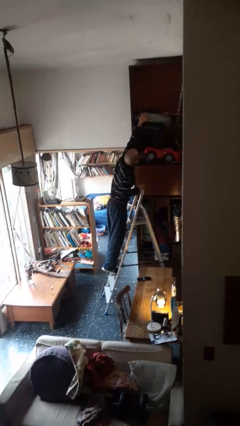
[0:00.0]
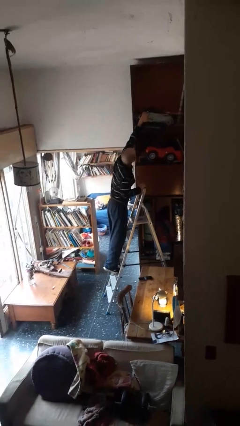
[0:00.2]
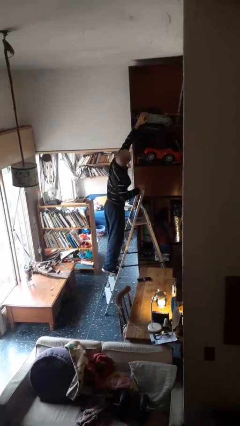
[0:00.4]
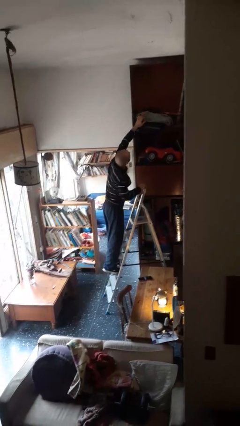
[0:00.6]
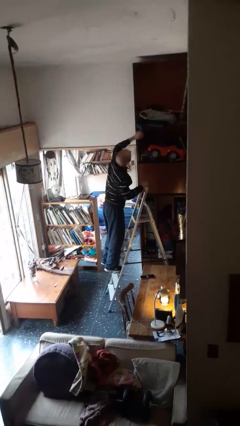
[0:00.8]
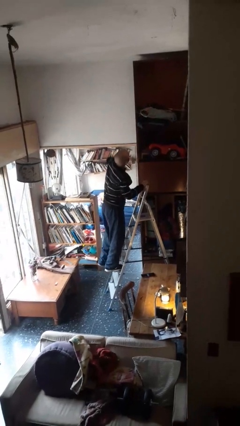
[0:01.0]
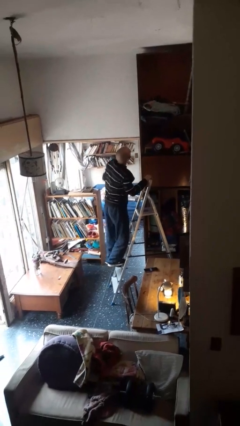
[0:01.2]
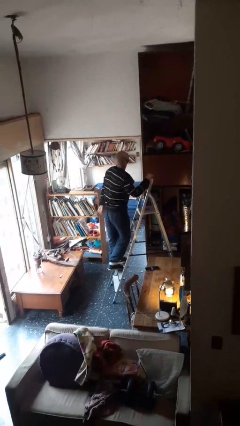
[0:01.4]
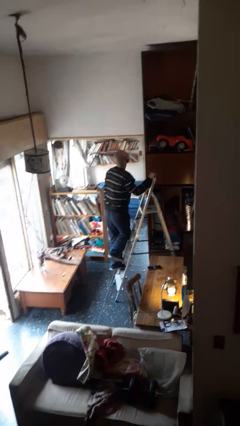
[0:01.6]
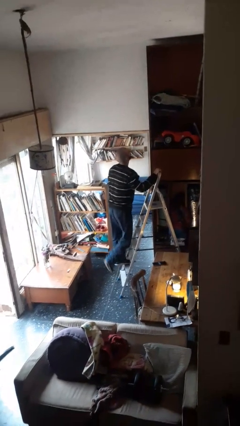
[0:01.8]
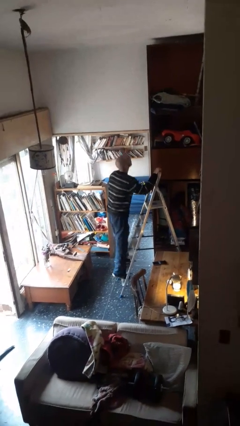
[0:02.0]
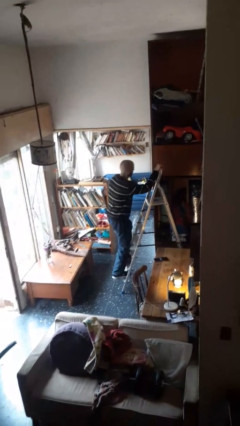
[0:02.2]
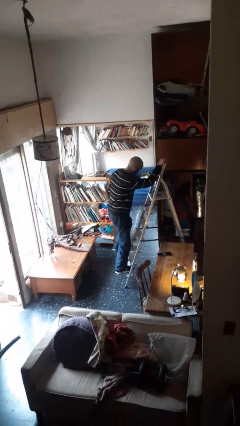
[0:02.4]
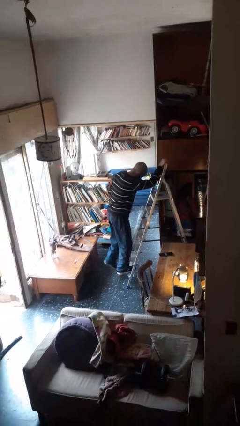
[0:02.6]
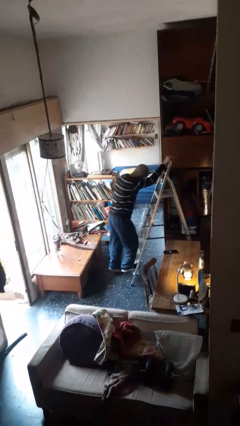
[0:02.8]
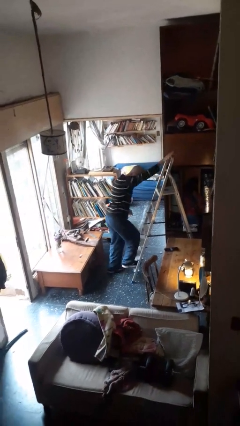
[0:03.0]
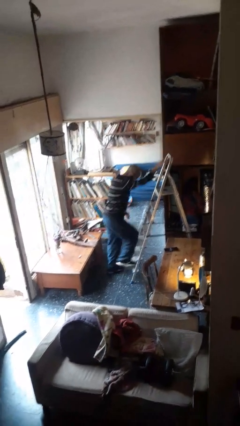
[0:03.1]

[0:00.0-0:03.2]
person climbs down ladder

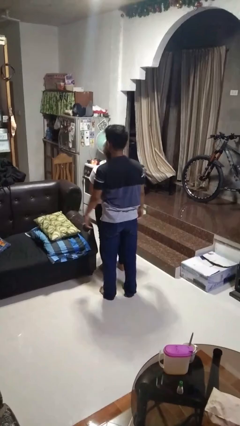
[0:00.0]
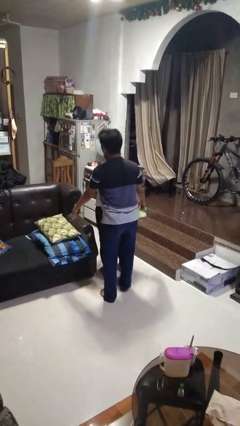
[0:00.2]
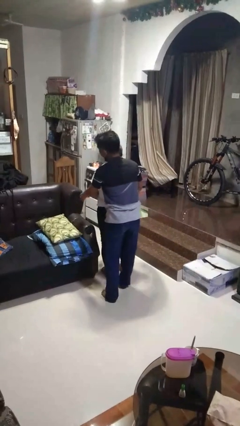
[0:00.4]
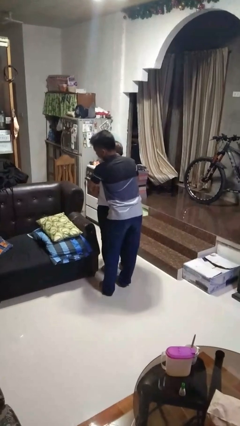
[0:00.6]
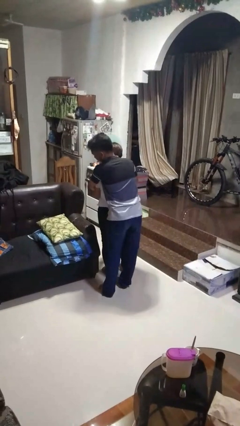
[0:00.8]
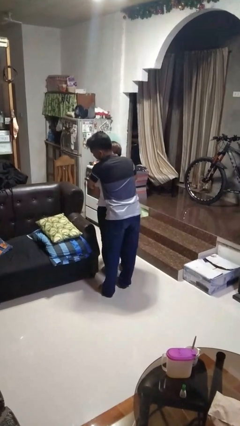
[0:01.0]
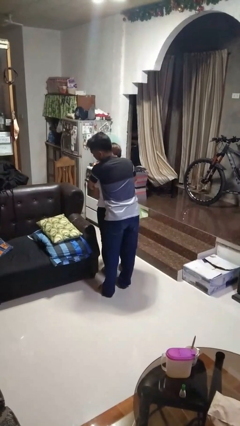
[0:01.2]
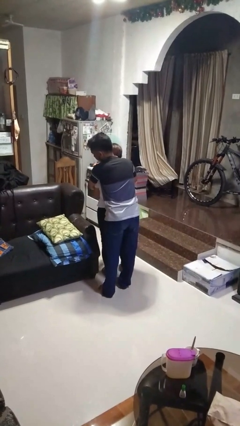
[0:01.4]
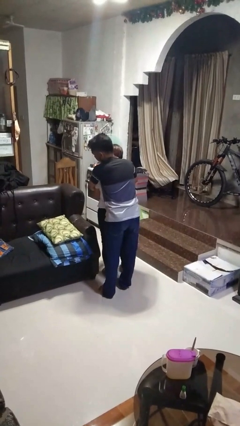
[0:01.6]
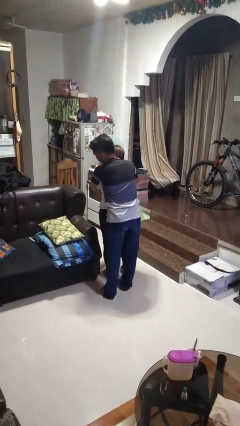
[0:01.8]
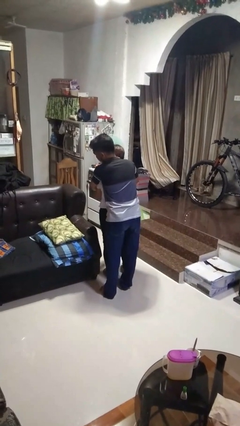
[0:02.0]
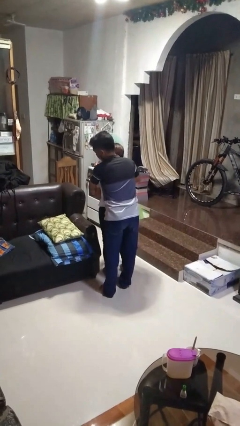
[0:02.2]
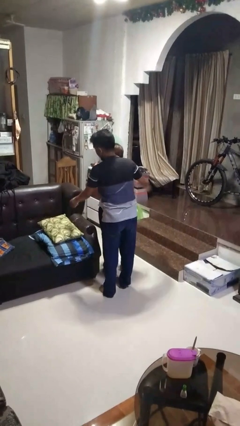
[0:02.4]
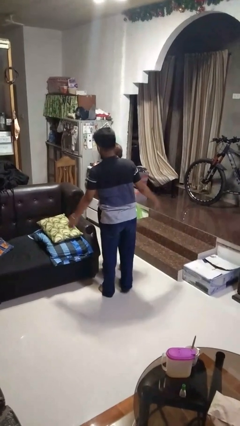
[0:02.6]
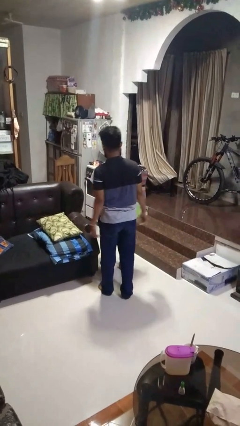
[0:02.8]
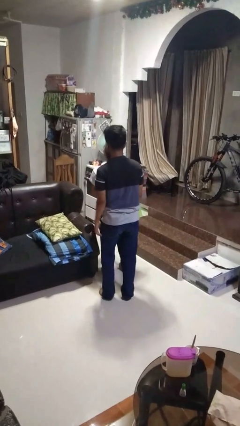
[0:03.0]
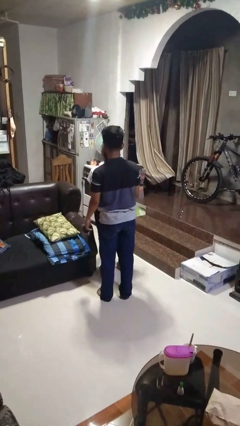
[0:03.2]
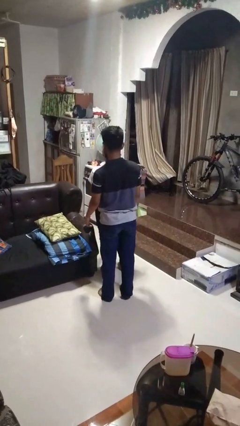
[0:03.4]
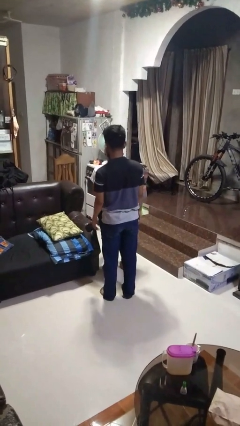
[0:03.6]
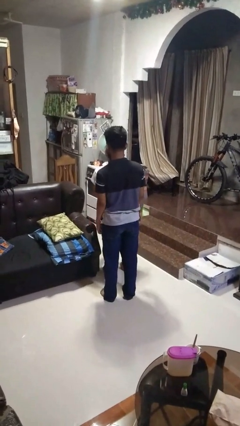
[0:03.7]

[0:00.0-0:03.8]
person hugs person from behind

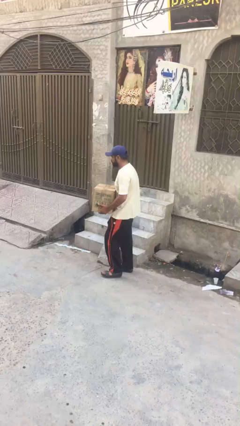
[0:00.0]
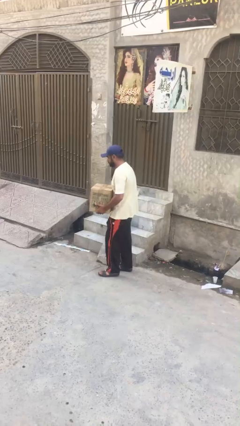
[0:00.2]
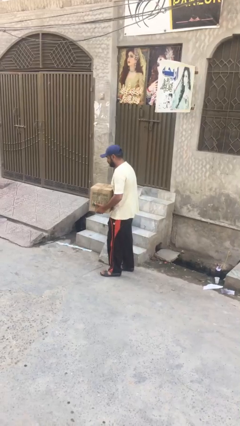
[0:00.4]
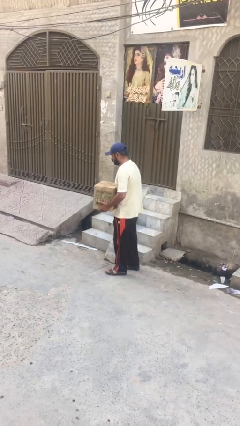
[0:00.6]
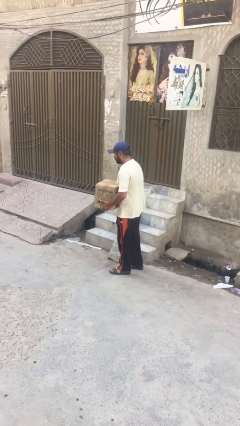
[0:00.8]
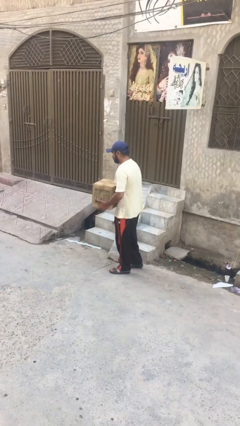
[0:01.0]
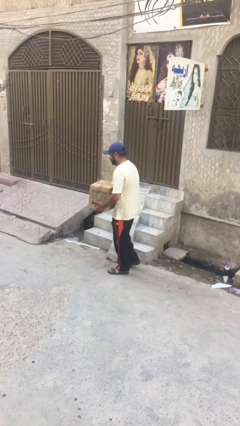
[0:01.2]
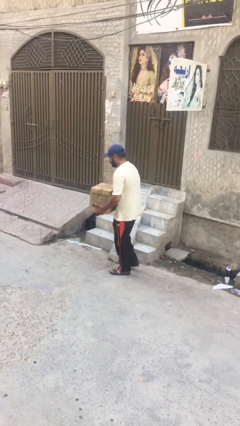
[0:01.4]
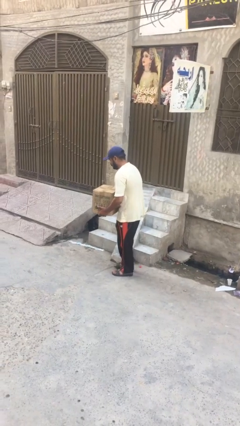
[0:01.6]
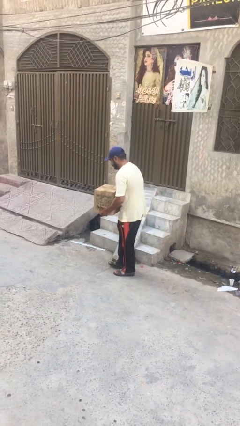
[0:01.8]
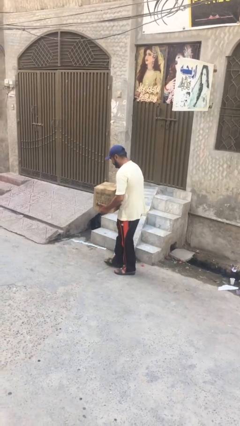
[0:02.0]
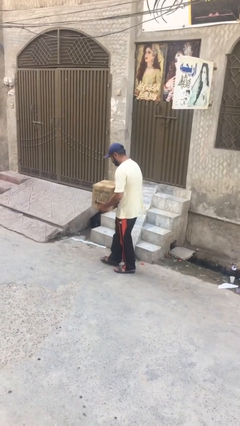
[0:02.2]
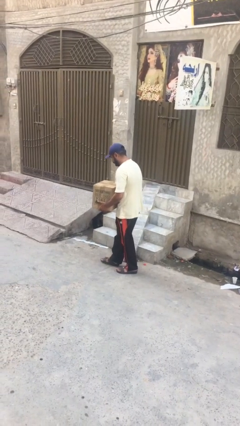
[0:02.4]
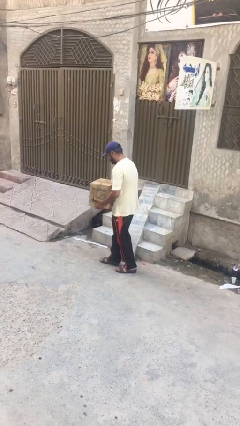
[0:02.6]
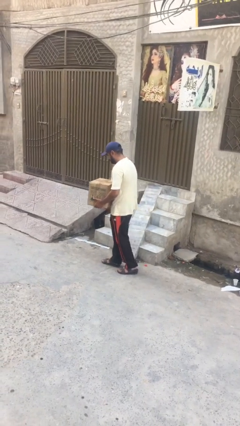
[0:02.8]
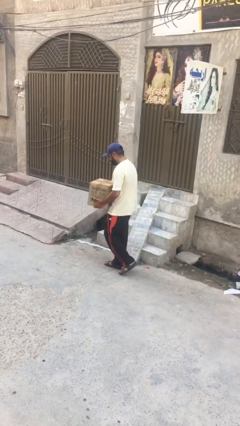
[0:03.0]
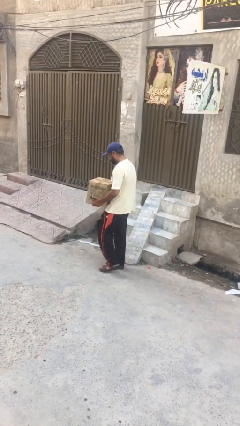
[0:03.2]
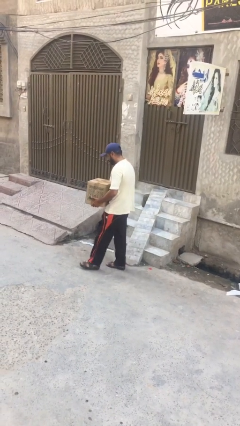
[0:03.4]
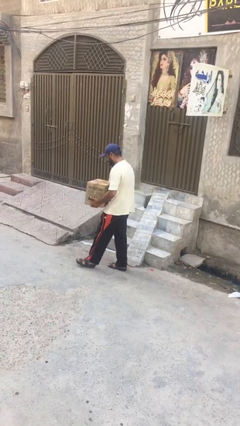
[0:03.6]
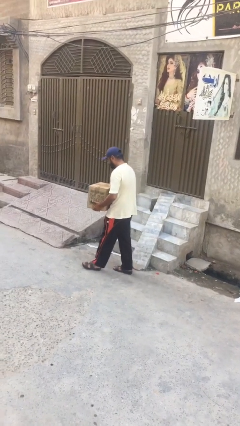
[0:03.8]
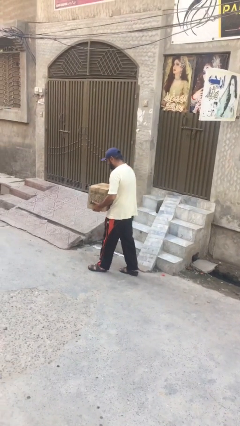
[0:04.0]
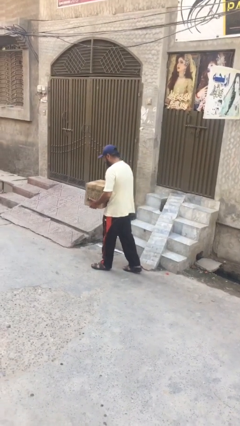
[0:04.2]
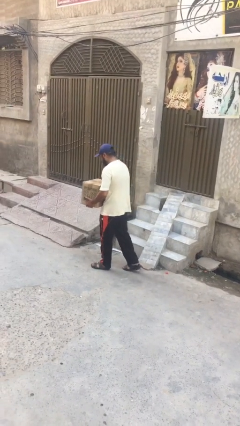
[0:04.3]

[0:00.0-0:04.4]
person carries heavy object

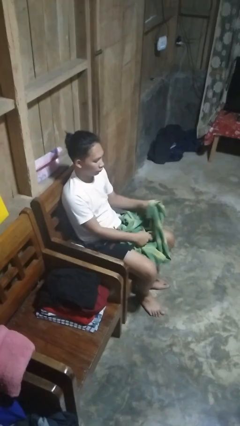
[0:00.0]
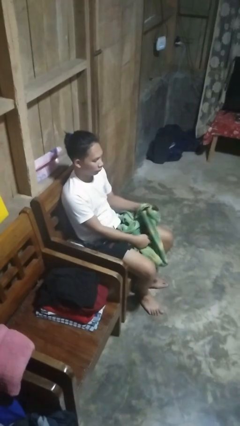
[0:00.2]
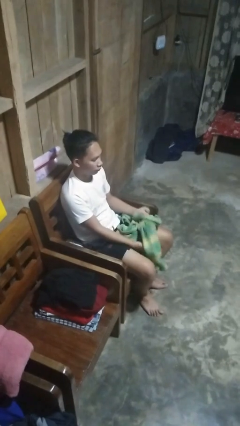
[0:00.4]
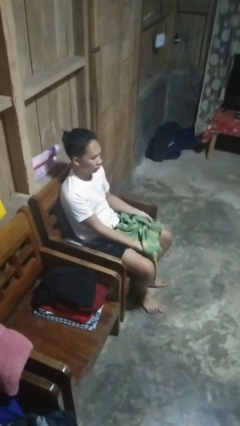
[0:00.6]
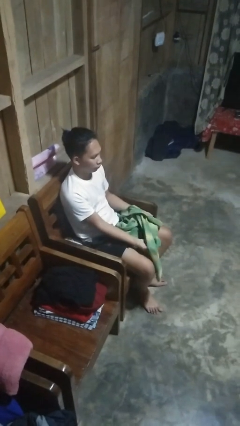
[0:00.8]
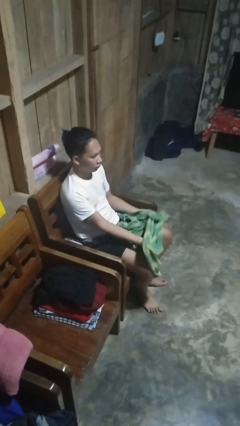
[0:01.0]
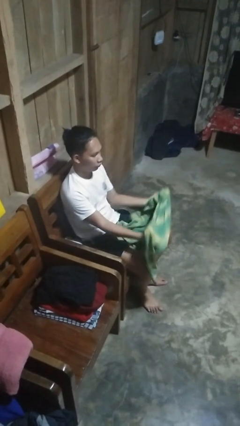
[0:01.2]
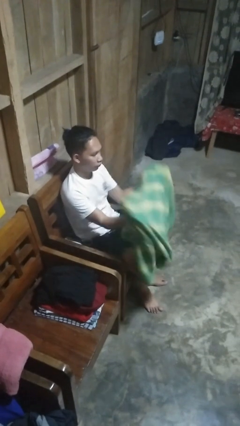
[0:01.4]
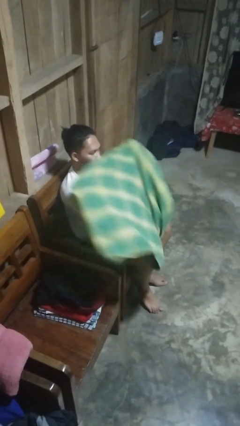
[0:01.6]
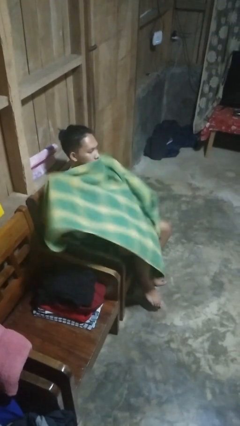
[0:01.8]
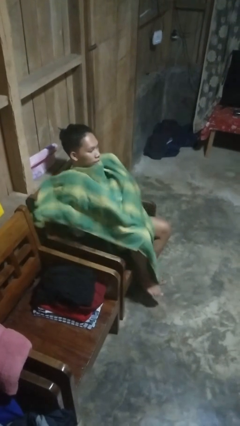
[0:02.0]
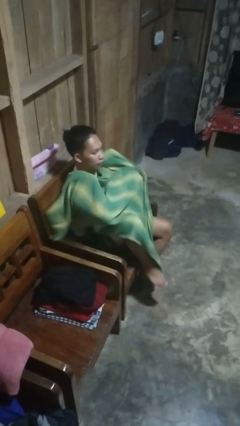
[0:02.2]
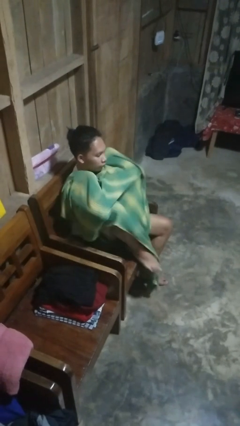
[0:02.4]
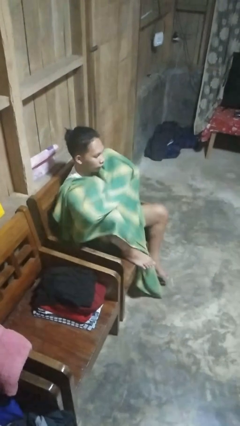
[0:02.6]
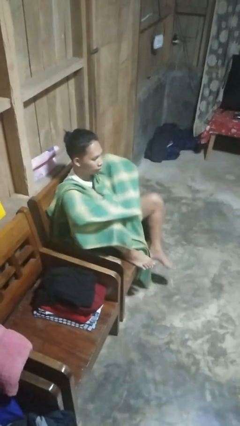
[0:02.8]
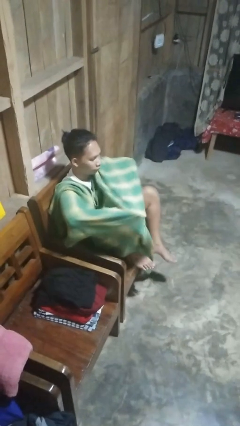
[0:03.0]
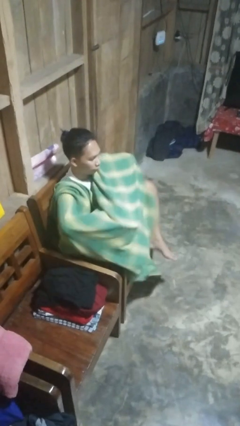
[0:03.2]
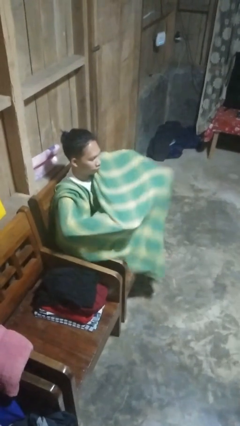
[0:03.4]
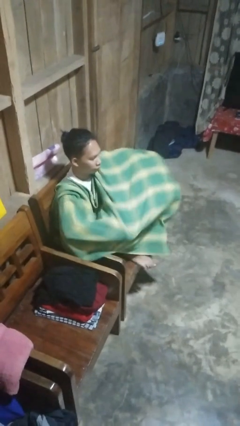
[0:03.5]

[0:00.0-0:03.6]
person covers with blanket

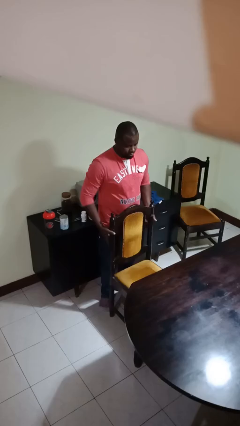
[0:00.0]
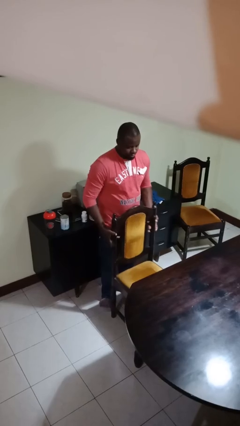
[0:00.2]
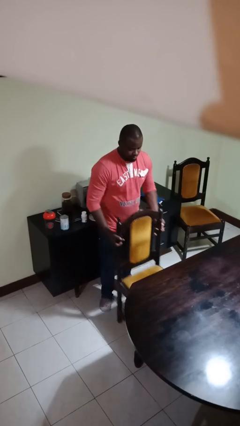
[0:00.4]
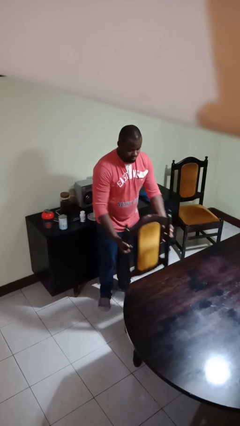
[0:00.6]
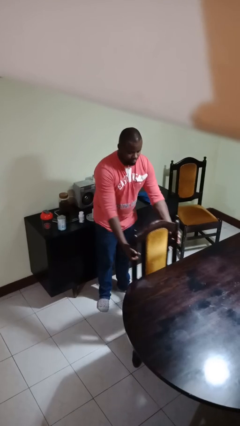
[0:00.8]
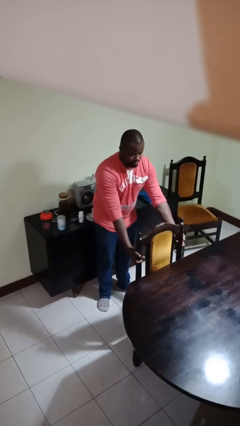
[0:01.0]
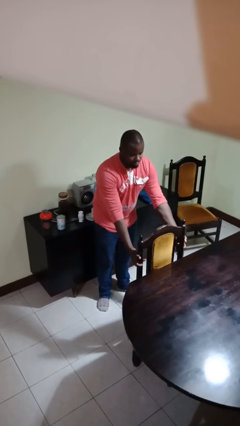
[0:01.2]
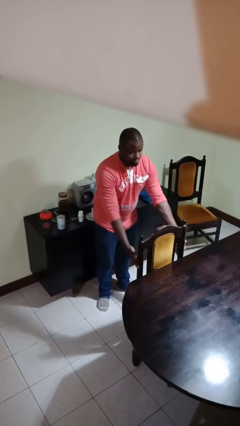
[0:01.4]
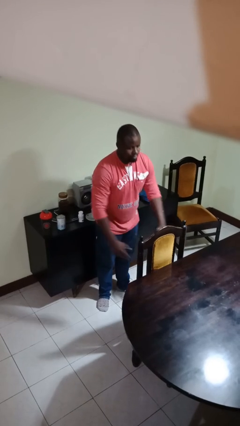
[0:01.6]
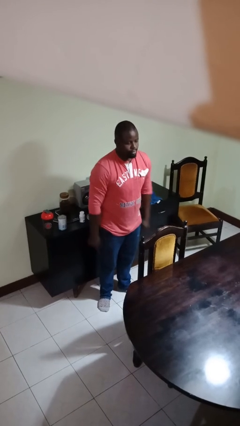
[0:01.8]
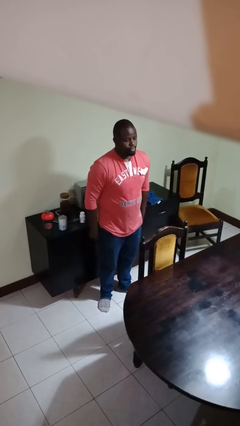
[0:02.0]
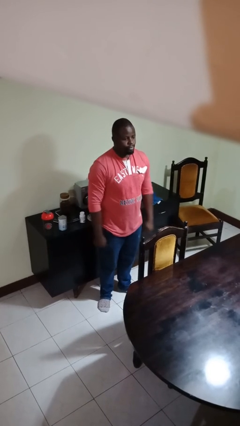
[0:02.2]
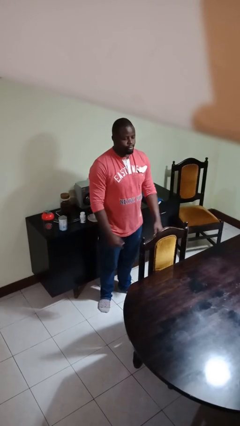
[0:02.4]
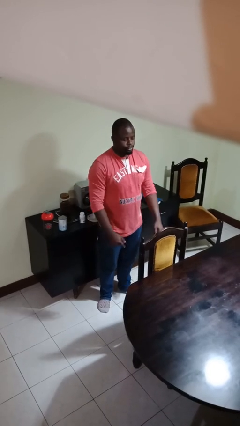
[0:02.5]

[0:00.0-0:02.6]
person pushes in chair
